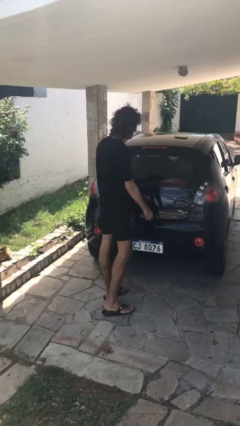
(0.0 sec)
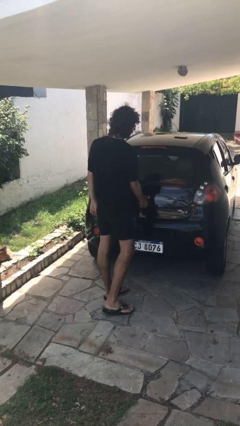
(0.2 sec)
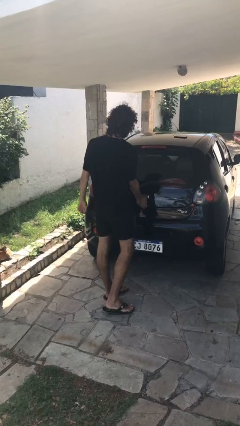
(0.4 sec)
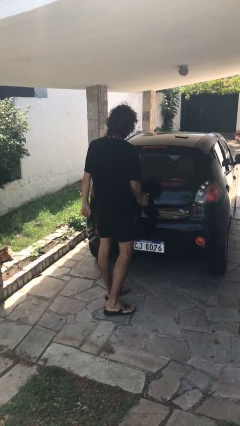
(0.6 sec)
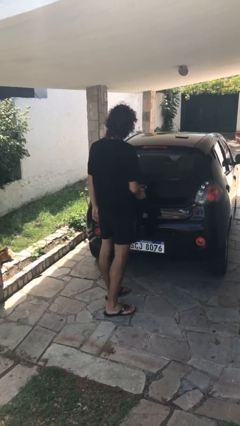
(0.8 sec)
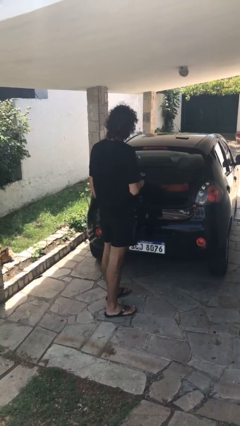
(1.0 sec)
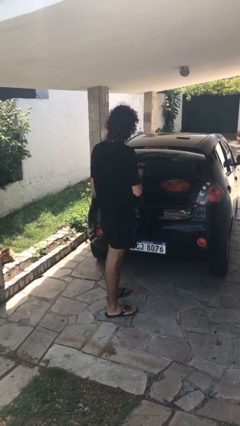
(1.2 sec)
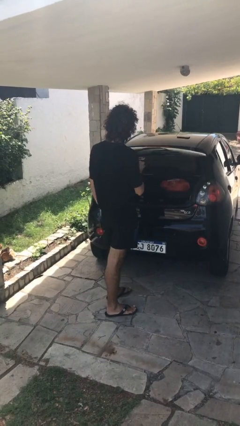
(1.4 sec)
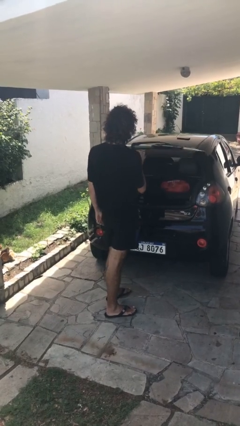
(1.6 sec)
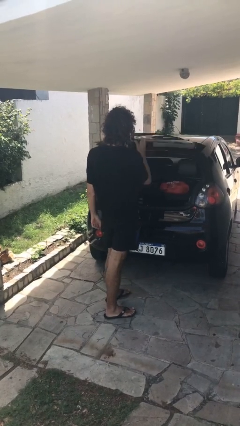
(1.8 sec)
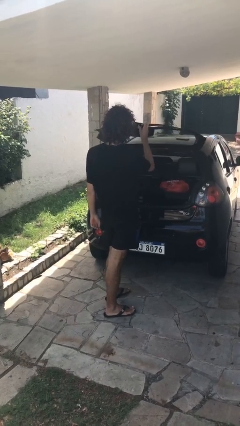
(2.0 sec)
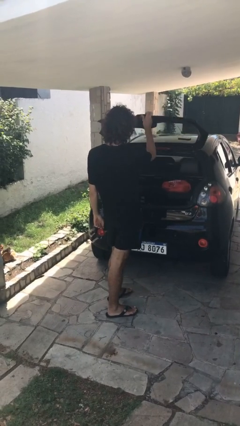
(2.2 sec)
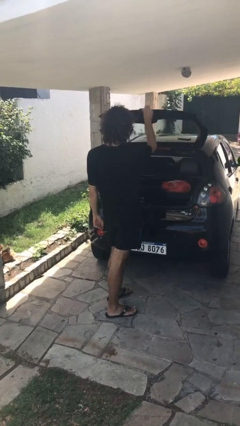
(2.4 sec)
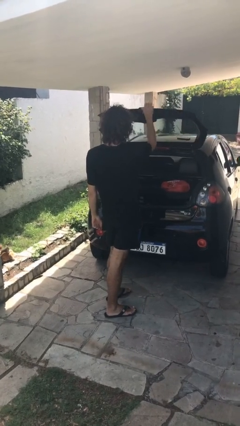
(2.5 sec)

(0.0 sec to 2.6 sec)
person opens car trunk

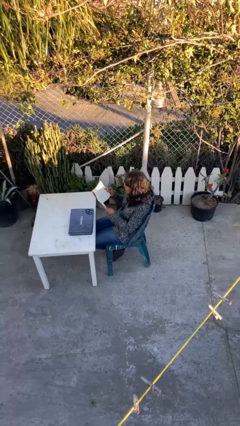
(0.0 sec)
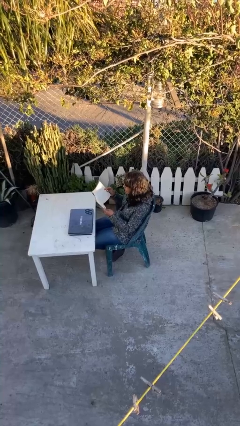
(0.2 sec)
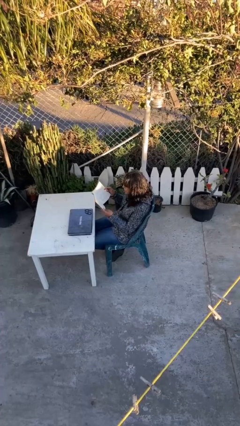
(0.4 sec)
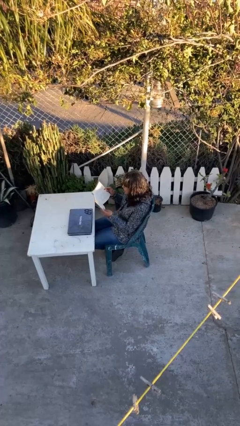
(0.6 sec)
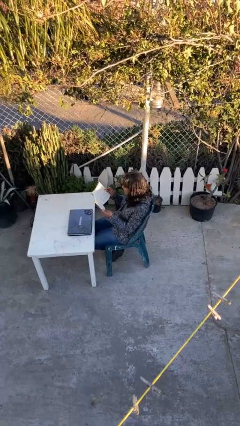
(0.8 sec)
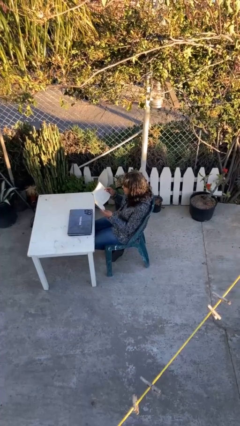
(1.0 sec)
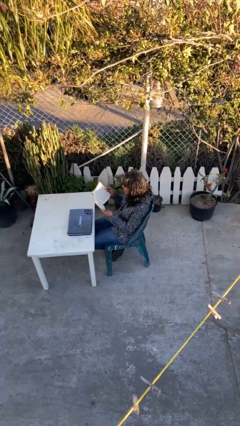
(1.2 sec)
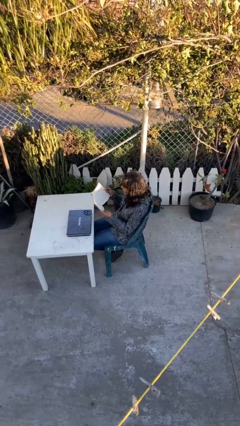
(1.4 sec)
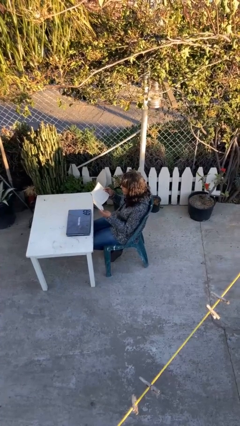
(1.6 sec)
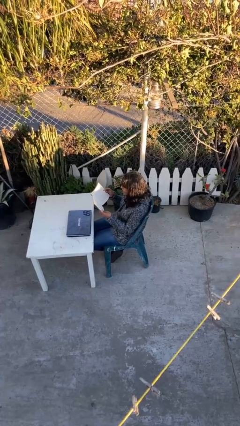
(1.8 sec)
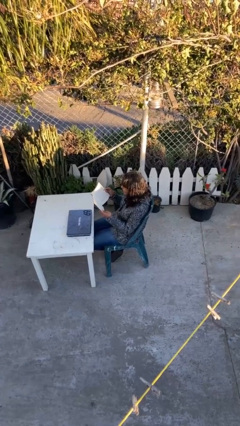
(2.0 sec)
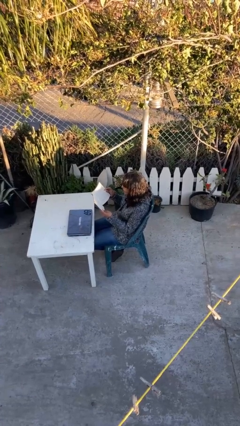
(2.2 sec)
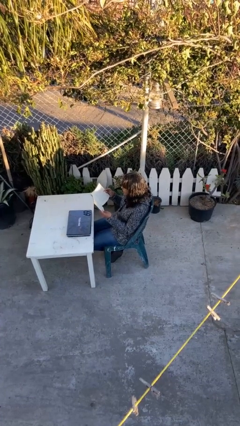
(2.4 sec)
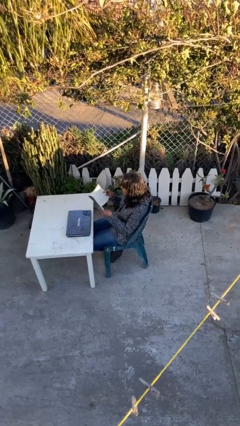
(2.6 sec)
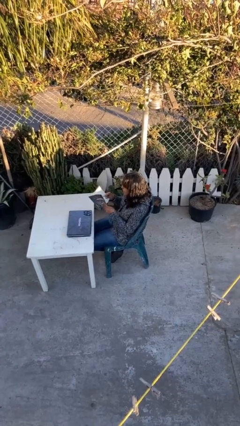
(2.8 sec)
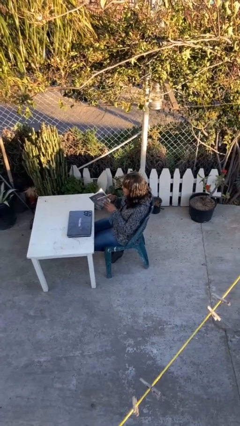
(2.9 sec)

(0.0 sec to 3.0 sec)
person reads document

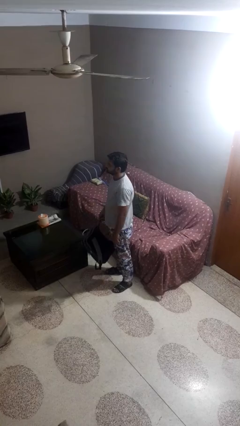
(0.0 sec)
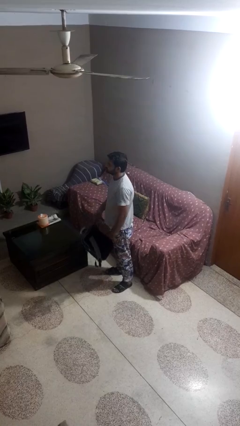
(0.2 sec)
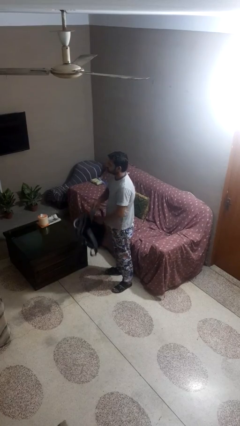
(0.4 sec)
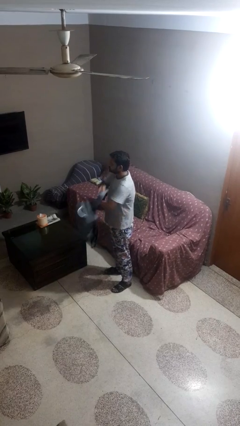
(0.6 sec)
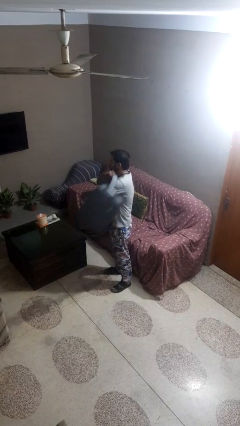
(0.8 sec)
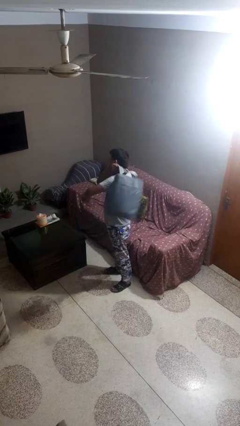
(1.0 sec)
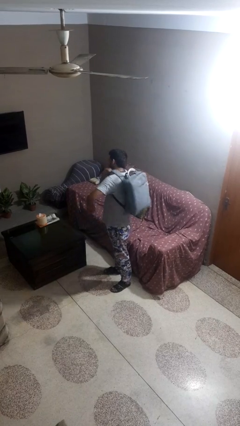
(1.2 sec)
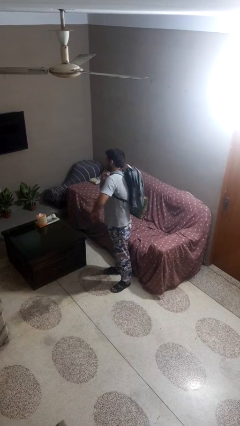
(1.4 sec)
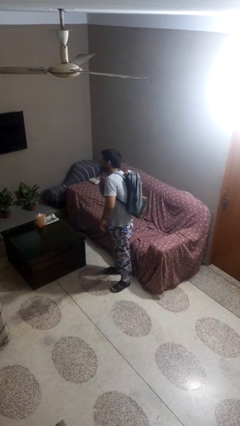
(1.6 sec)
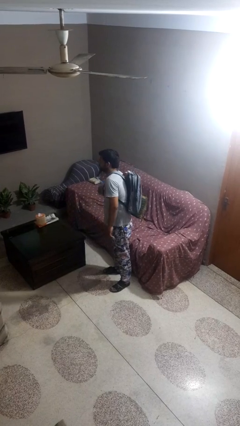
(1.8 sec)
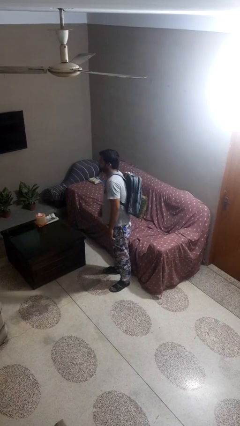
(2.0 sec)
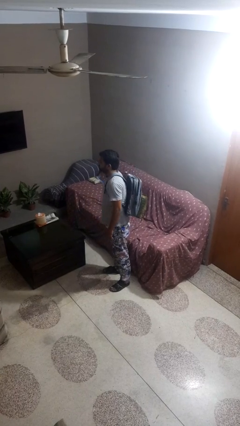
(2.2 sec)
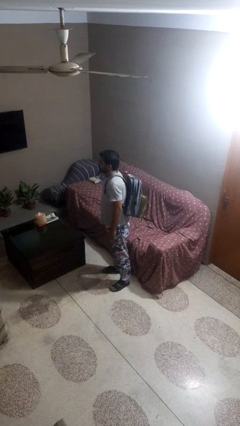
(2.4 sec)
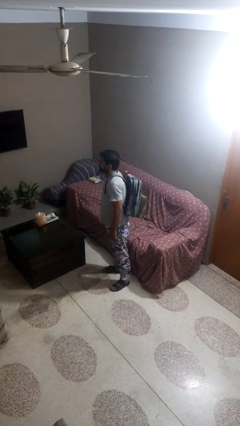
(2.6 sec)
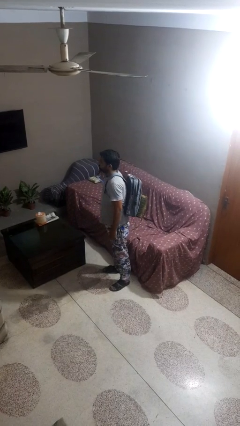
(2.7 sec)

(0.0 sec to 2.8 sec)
person puts on backpack

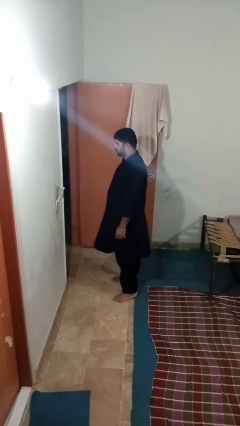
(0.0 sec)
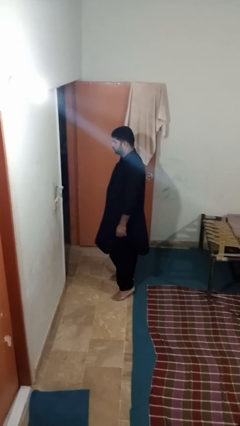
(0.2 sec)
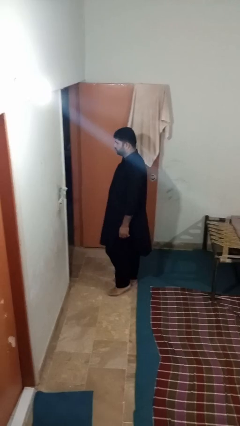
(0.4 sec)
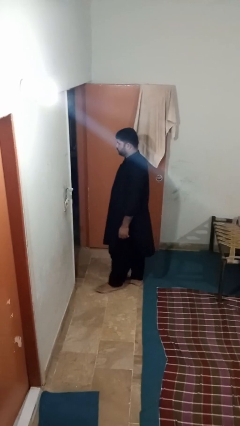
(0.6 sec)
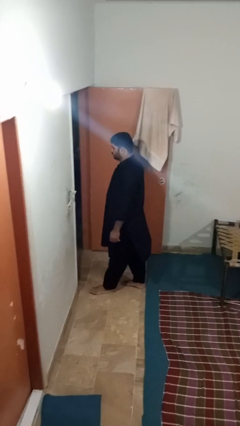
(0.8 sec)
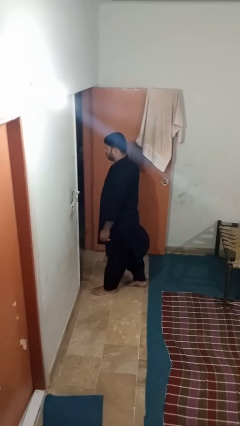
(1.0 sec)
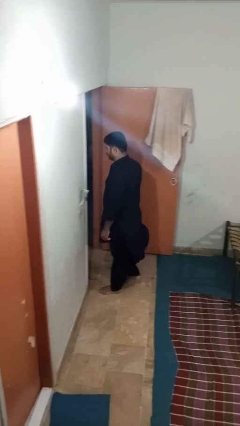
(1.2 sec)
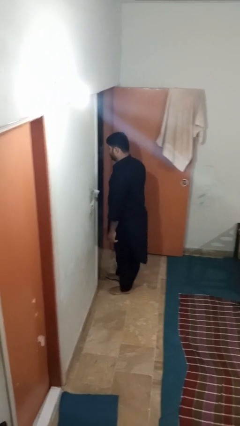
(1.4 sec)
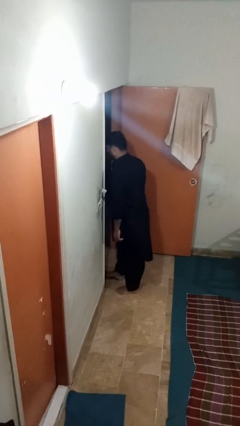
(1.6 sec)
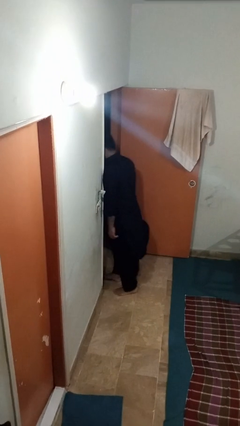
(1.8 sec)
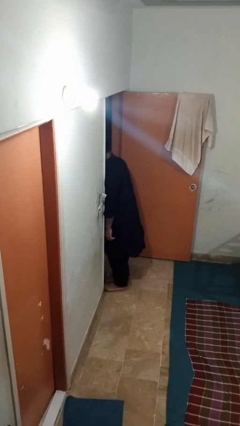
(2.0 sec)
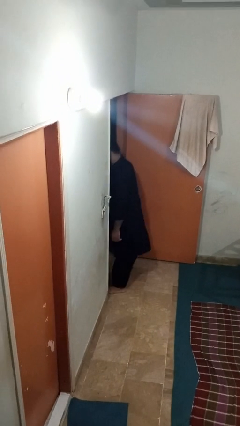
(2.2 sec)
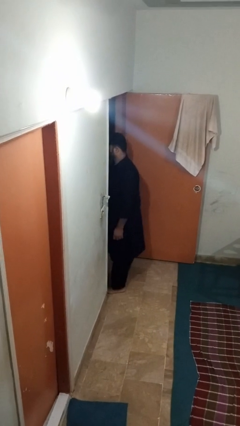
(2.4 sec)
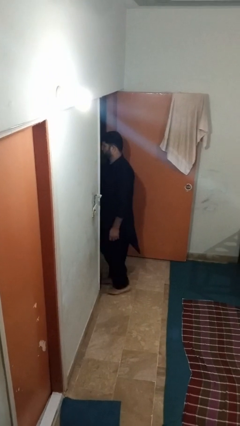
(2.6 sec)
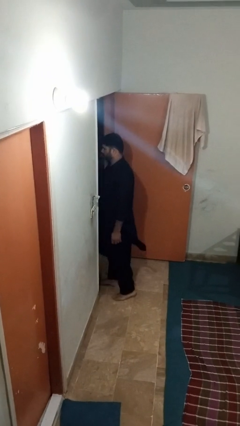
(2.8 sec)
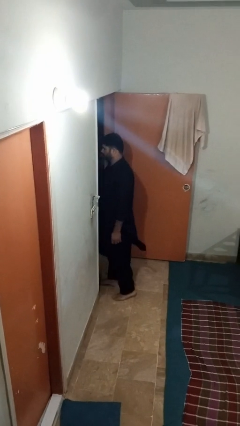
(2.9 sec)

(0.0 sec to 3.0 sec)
person bumps into wall

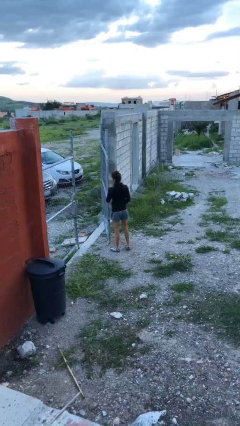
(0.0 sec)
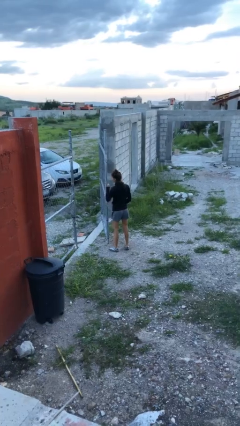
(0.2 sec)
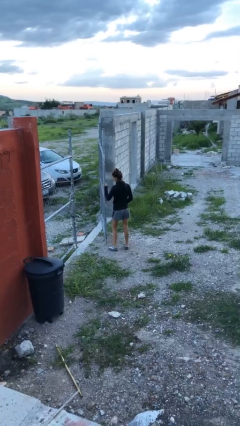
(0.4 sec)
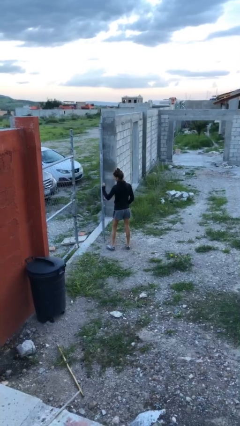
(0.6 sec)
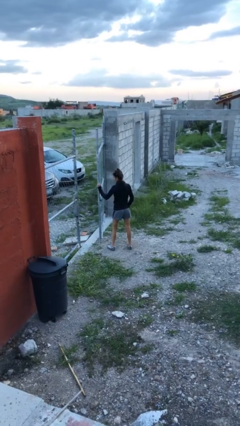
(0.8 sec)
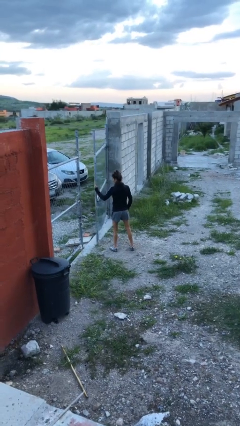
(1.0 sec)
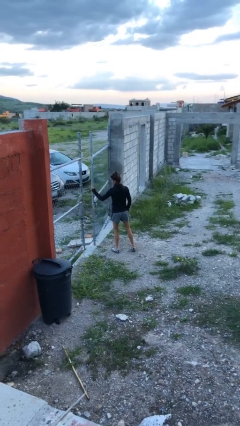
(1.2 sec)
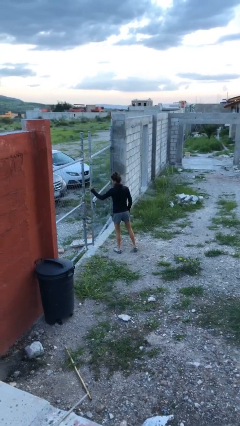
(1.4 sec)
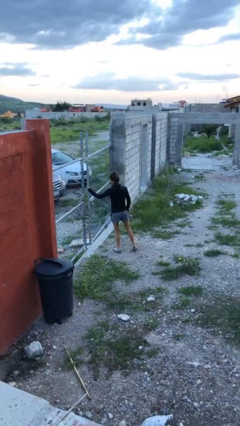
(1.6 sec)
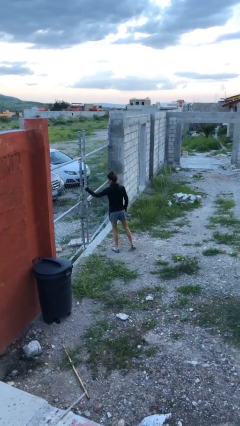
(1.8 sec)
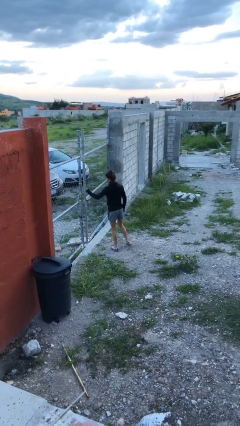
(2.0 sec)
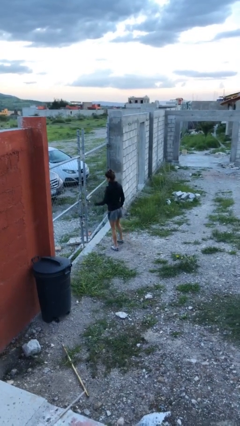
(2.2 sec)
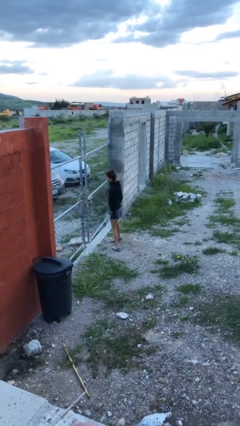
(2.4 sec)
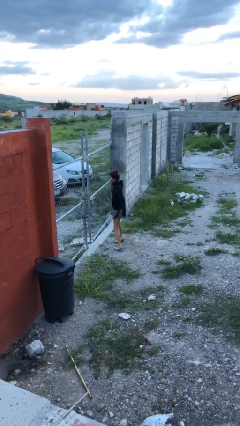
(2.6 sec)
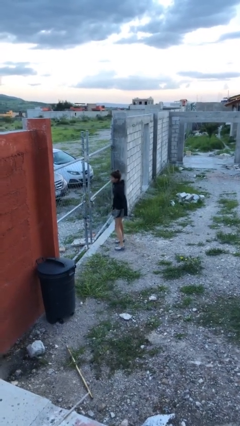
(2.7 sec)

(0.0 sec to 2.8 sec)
person closes gate

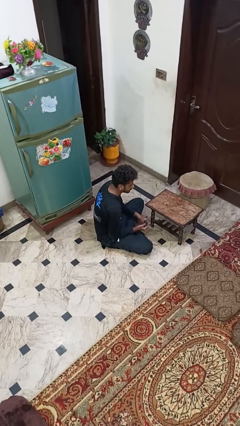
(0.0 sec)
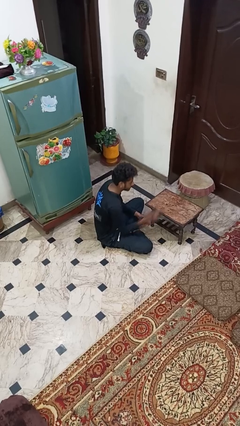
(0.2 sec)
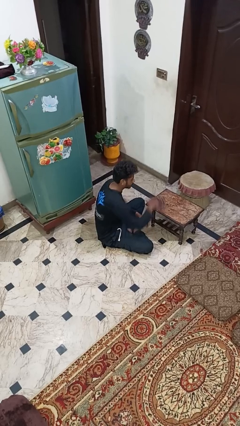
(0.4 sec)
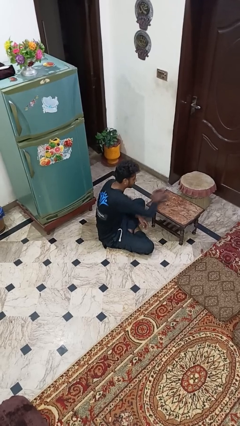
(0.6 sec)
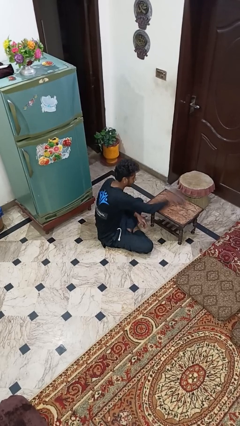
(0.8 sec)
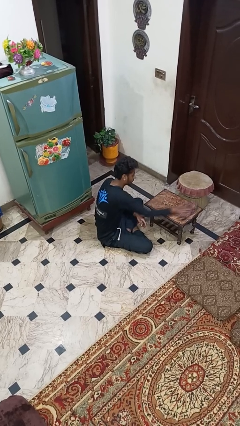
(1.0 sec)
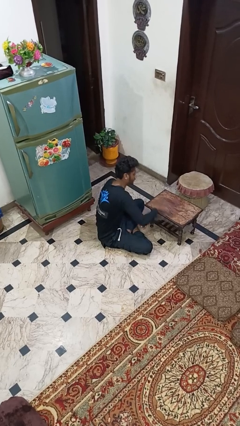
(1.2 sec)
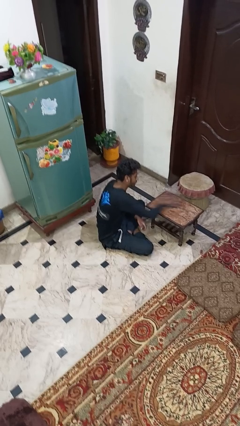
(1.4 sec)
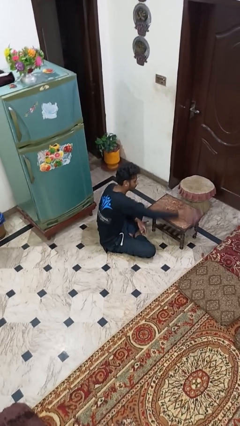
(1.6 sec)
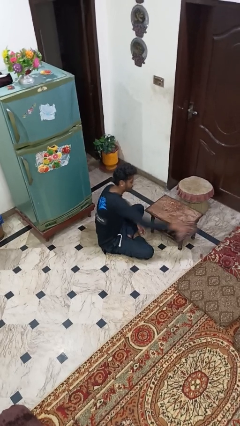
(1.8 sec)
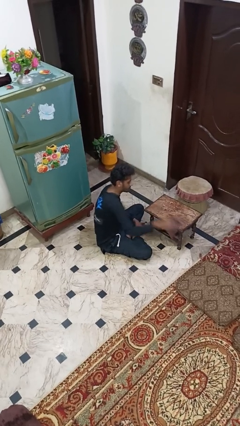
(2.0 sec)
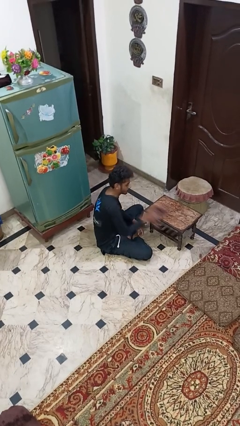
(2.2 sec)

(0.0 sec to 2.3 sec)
person cleans table with rag

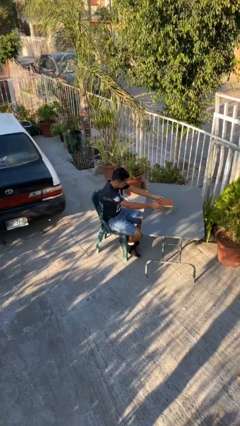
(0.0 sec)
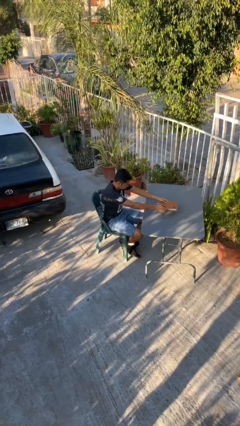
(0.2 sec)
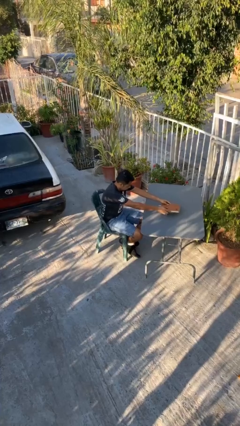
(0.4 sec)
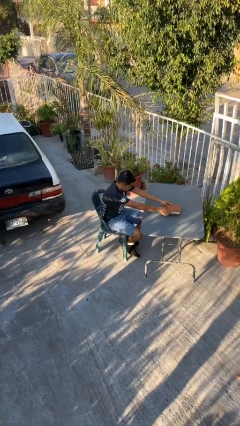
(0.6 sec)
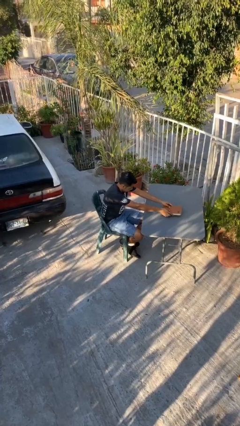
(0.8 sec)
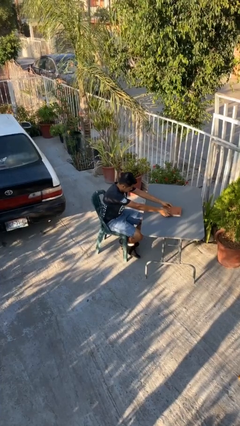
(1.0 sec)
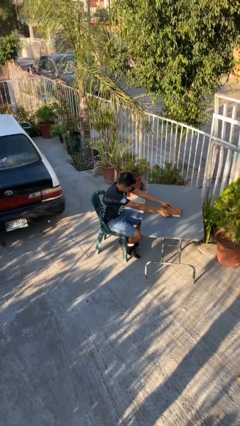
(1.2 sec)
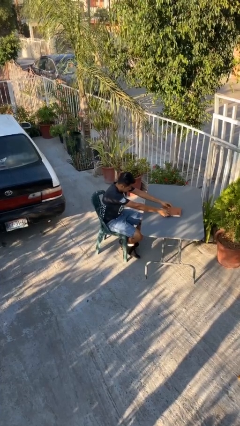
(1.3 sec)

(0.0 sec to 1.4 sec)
person puts down object on table
